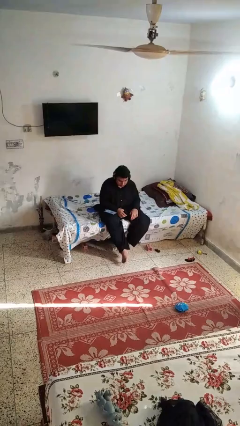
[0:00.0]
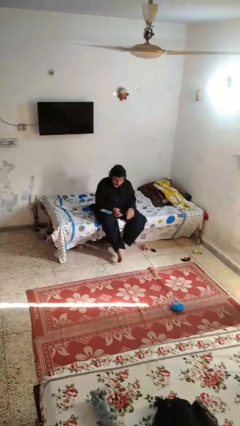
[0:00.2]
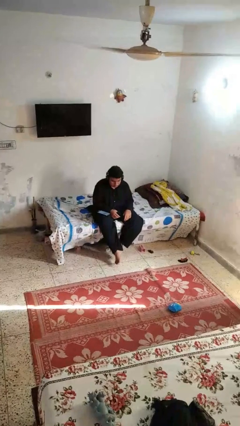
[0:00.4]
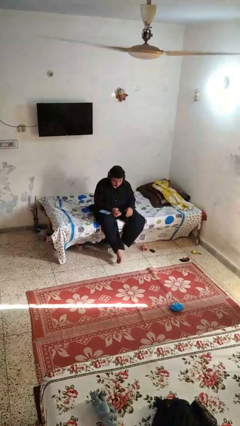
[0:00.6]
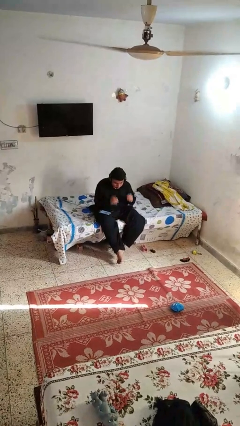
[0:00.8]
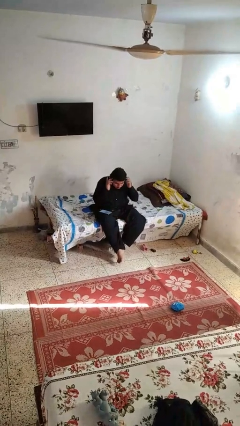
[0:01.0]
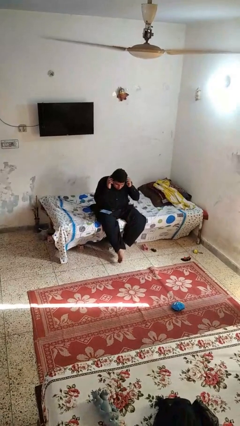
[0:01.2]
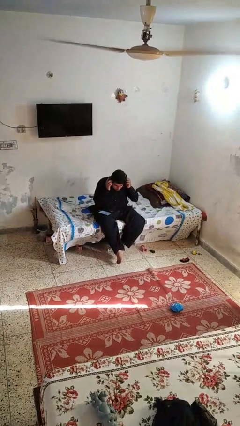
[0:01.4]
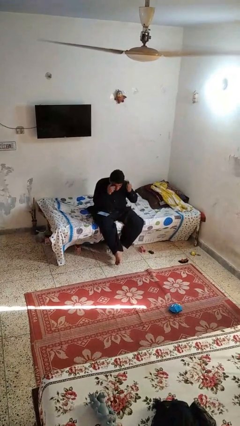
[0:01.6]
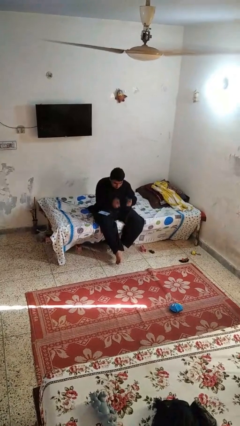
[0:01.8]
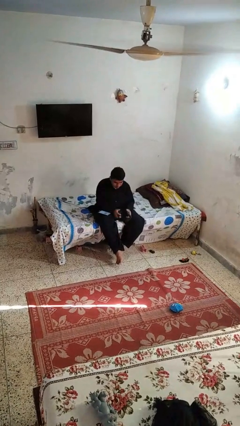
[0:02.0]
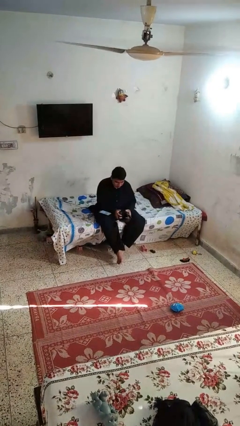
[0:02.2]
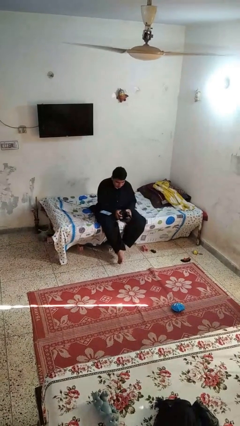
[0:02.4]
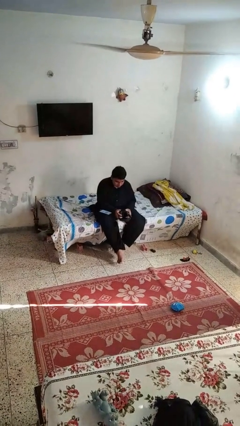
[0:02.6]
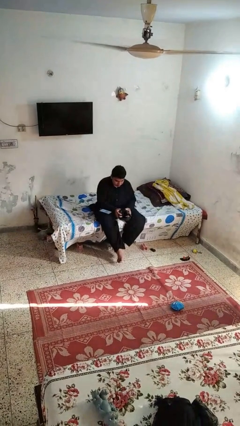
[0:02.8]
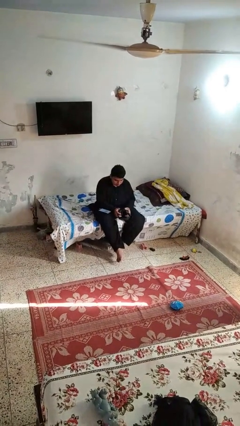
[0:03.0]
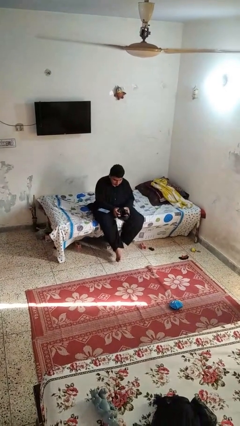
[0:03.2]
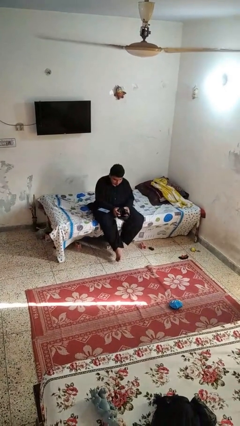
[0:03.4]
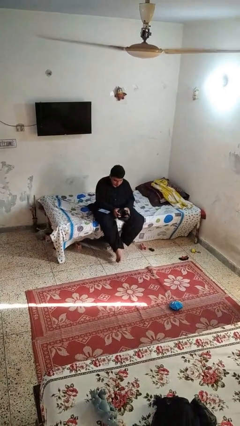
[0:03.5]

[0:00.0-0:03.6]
person takes off headphones

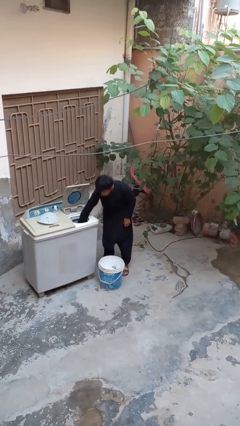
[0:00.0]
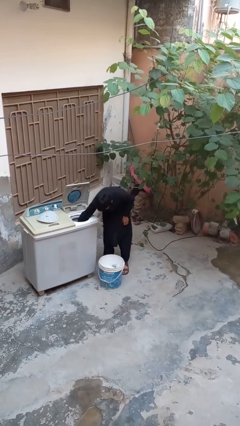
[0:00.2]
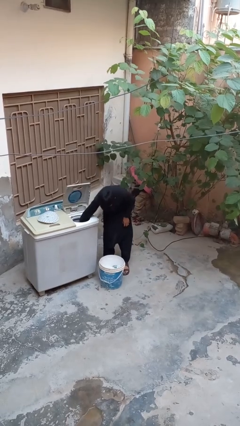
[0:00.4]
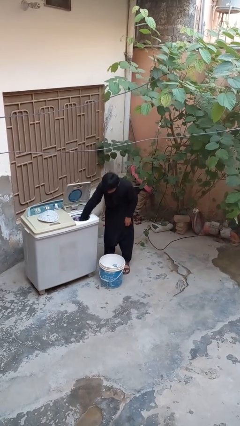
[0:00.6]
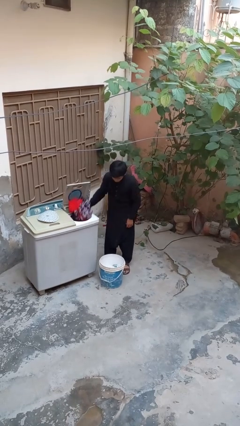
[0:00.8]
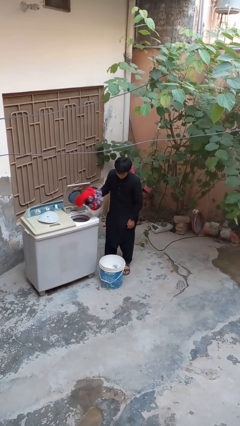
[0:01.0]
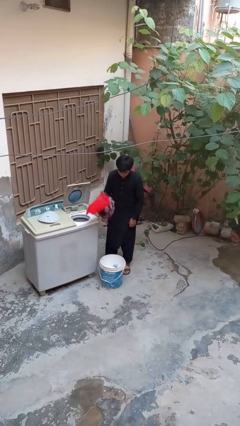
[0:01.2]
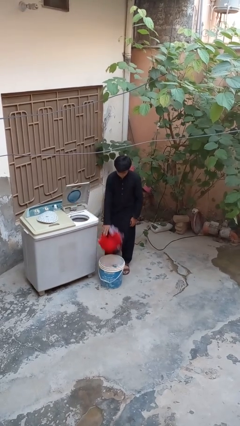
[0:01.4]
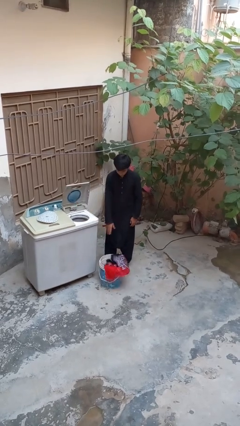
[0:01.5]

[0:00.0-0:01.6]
person unloads dryer

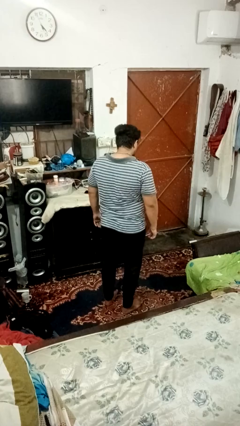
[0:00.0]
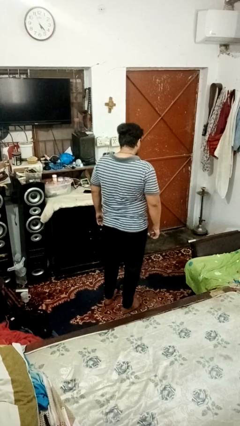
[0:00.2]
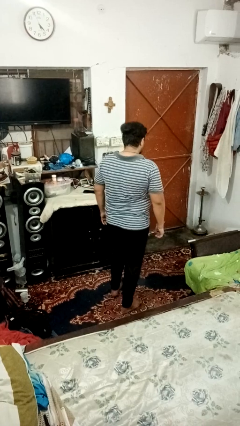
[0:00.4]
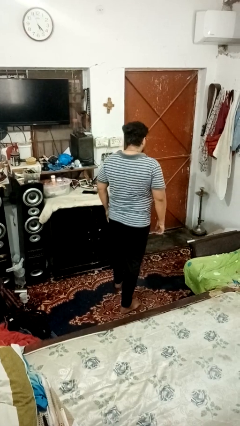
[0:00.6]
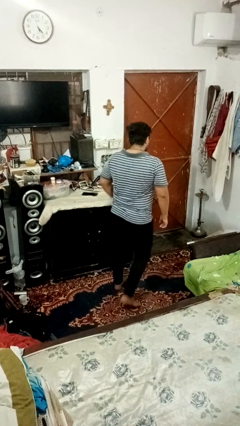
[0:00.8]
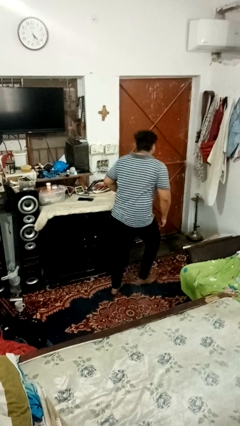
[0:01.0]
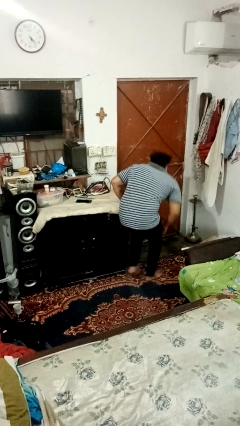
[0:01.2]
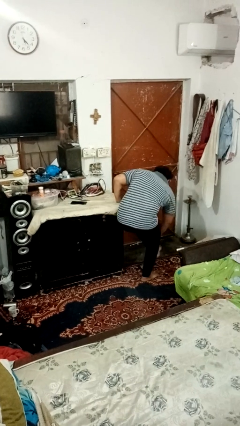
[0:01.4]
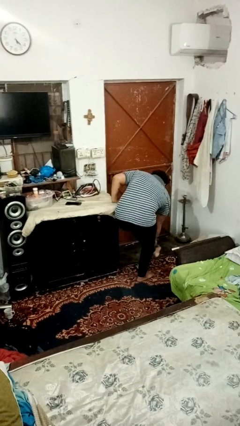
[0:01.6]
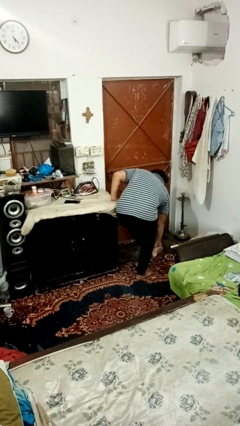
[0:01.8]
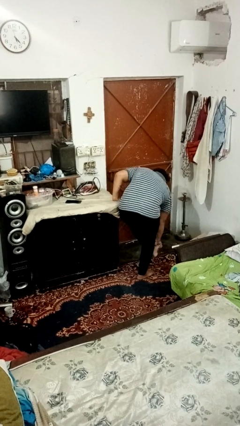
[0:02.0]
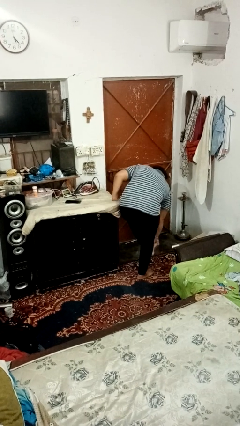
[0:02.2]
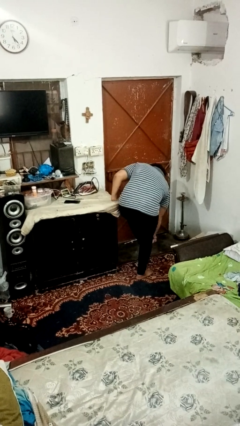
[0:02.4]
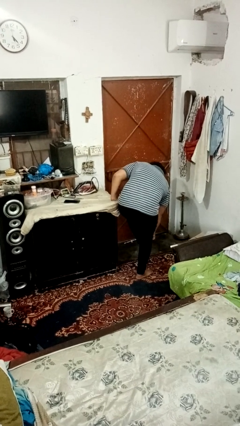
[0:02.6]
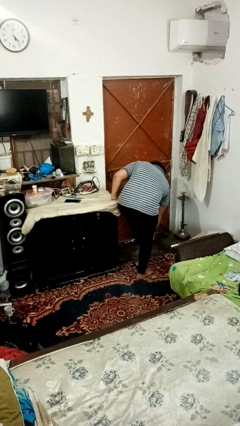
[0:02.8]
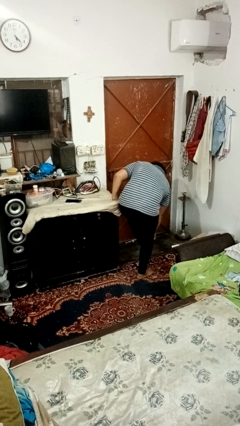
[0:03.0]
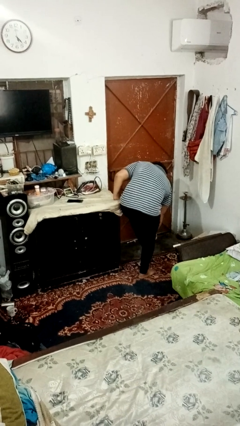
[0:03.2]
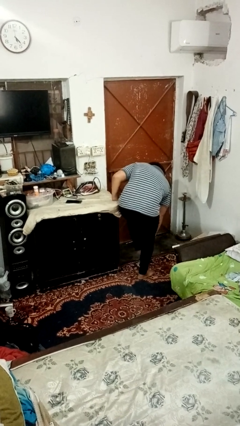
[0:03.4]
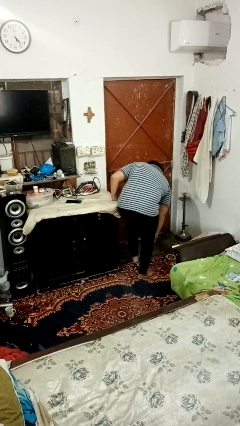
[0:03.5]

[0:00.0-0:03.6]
person stubs toe

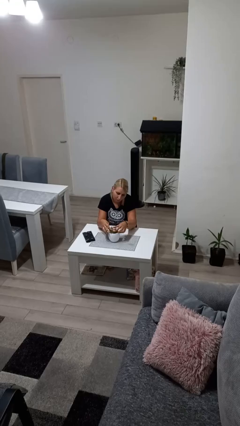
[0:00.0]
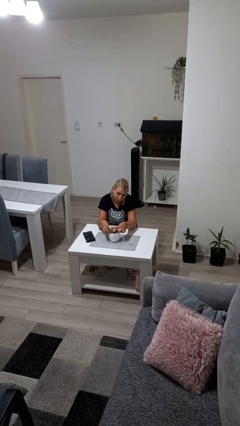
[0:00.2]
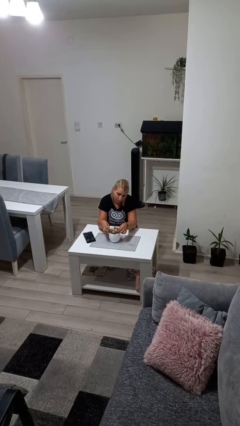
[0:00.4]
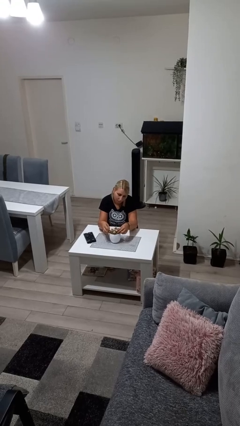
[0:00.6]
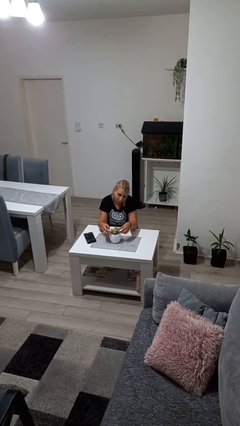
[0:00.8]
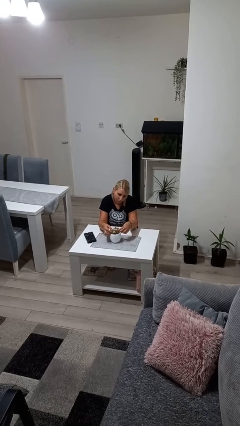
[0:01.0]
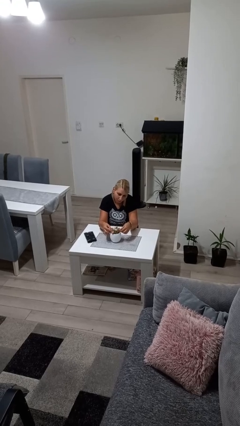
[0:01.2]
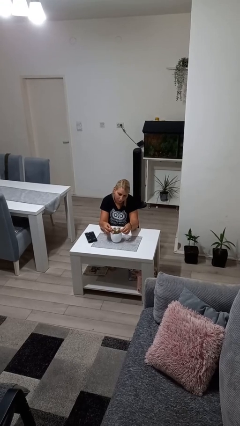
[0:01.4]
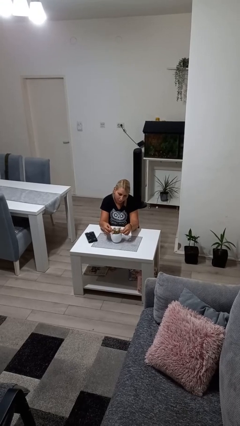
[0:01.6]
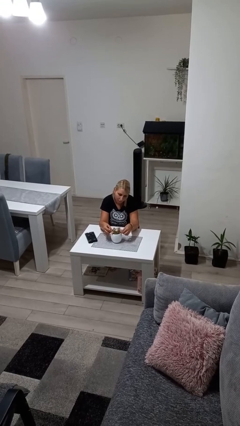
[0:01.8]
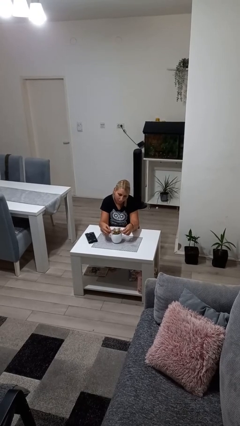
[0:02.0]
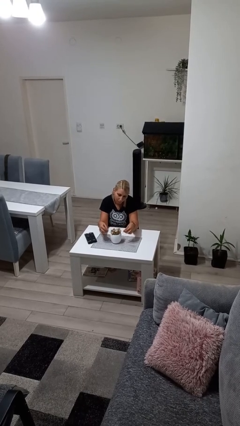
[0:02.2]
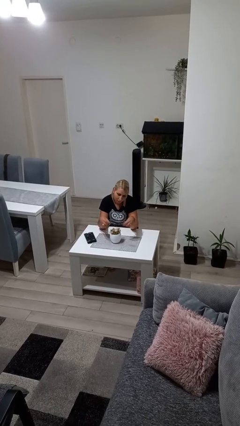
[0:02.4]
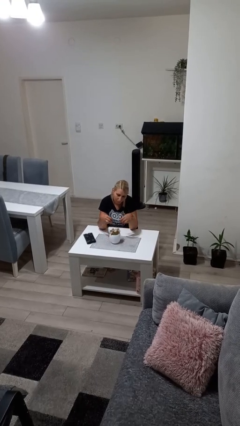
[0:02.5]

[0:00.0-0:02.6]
person arranges flowers in vase

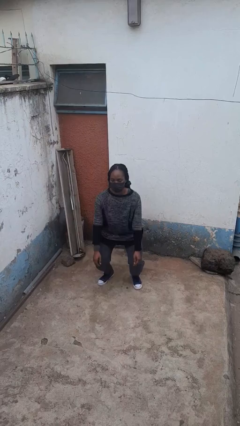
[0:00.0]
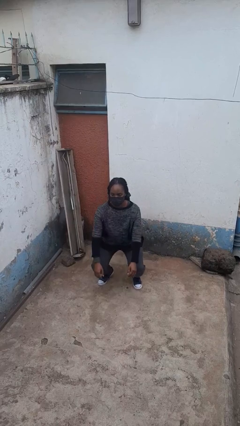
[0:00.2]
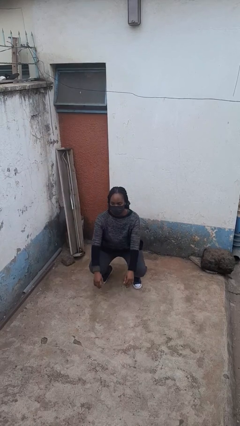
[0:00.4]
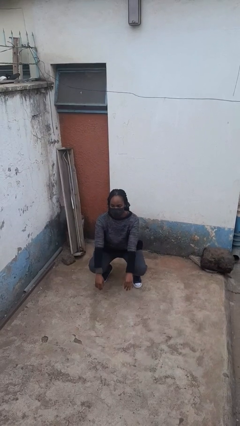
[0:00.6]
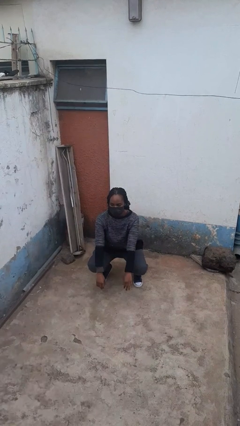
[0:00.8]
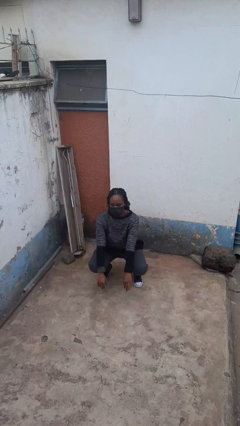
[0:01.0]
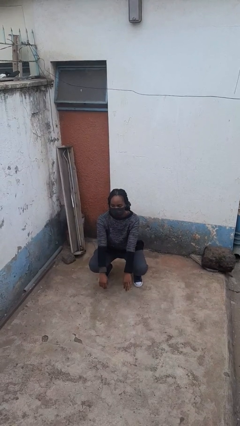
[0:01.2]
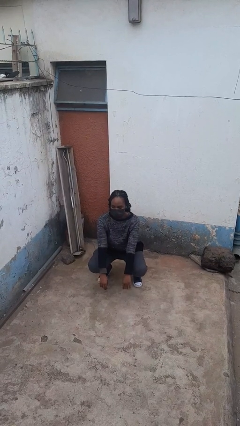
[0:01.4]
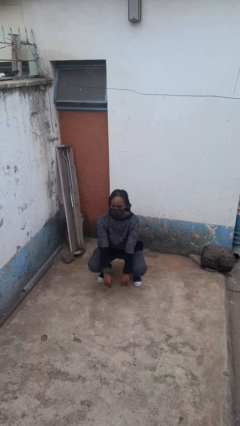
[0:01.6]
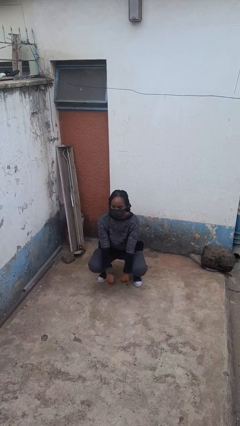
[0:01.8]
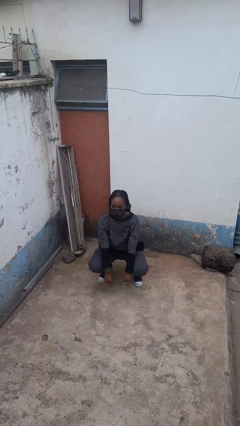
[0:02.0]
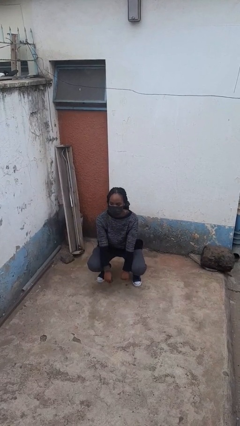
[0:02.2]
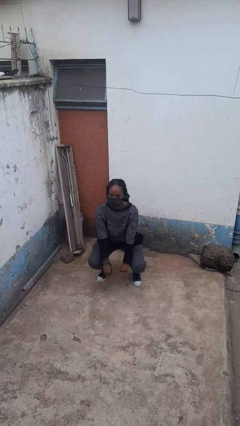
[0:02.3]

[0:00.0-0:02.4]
person squats

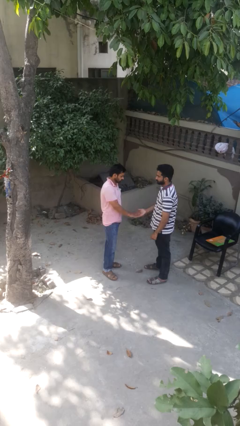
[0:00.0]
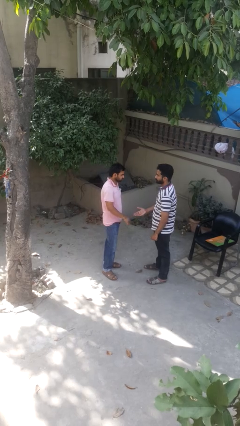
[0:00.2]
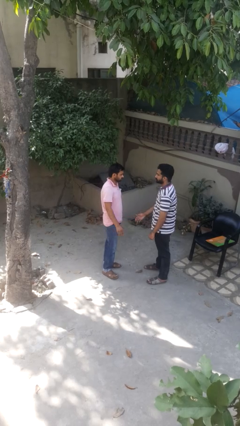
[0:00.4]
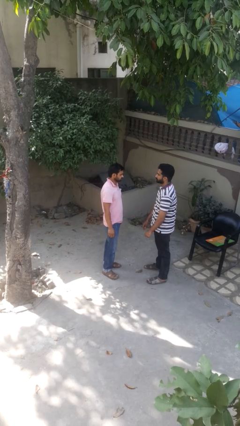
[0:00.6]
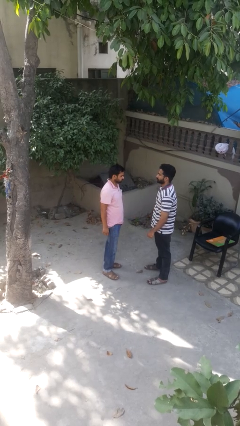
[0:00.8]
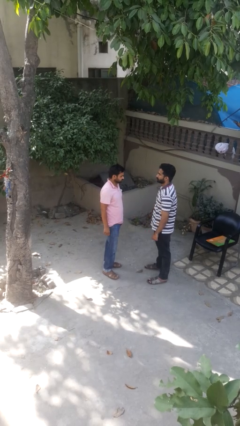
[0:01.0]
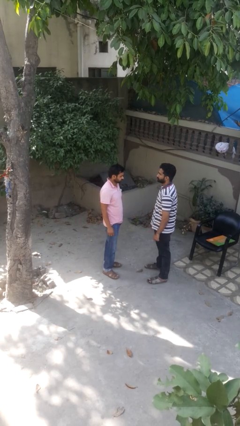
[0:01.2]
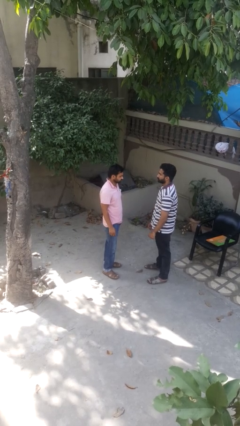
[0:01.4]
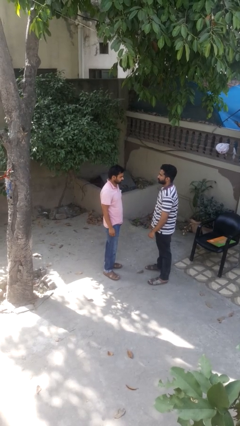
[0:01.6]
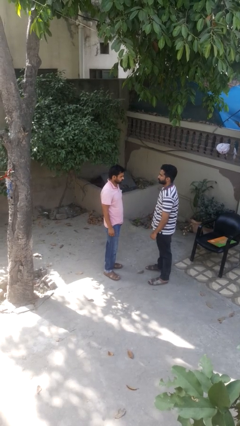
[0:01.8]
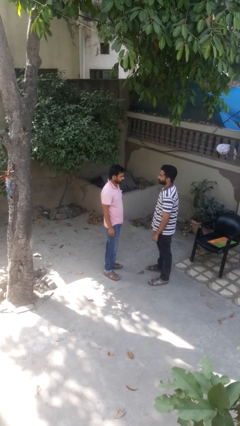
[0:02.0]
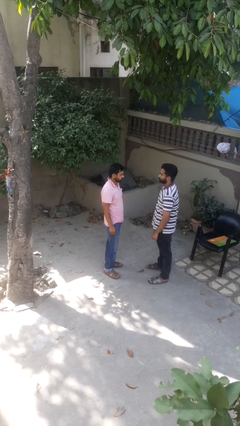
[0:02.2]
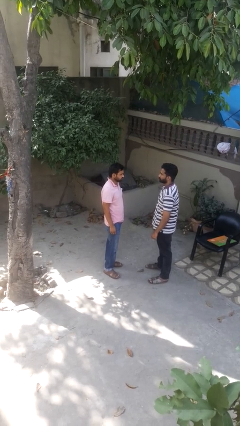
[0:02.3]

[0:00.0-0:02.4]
person highfives hand

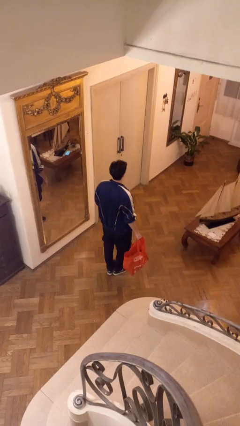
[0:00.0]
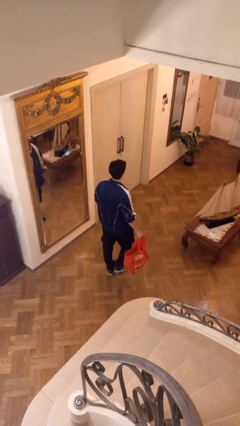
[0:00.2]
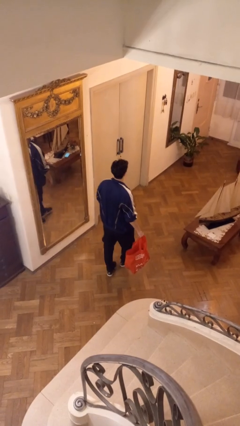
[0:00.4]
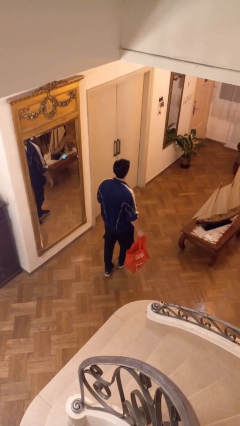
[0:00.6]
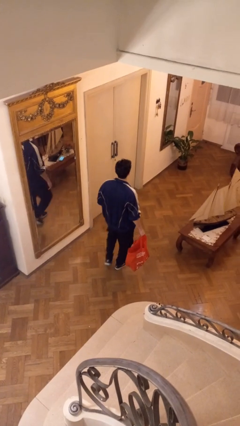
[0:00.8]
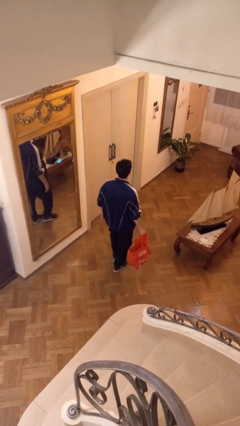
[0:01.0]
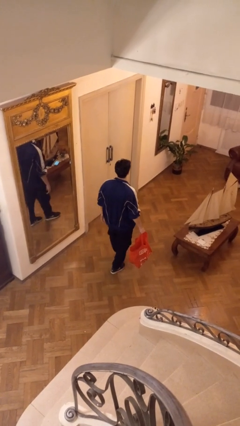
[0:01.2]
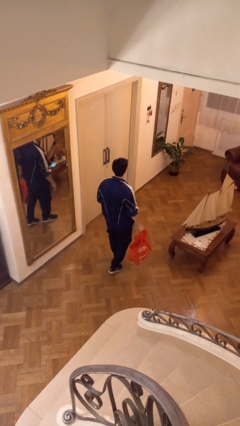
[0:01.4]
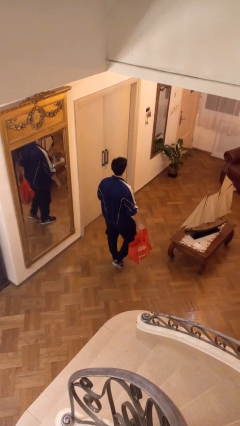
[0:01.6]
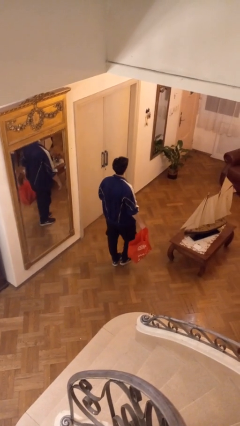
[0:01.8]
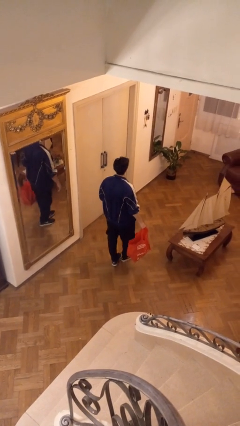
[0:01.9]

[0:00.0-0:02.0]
person carries groceries
